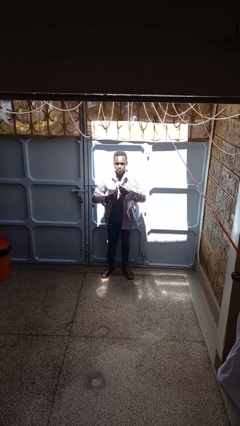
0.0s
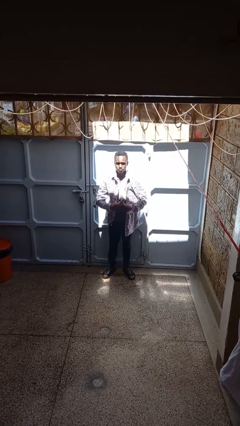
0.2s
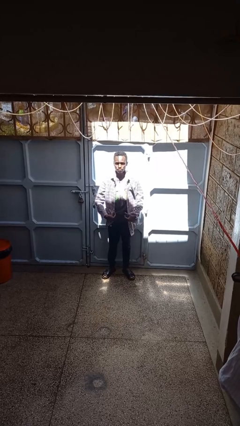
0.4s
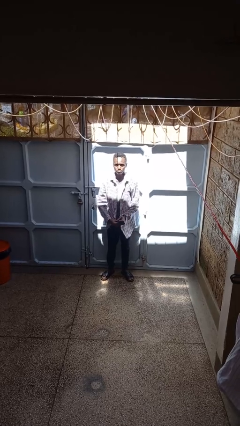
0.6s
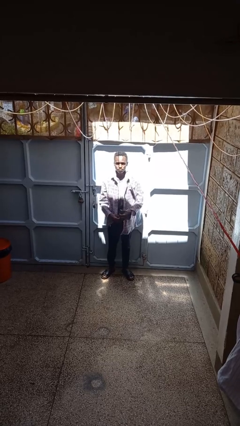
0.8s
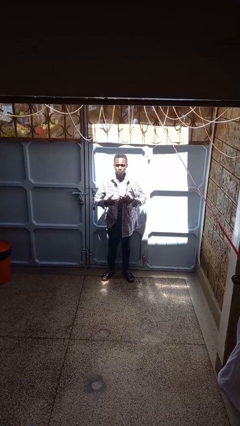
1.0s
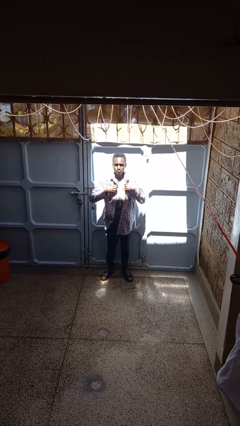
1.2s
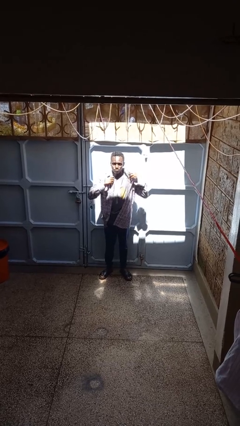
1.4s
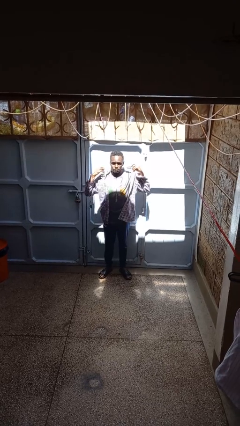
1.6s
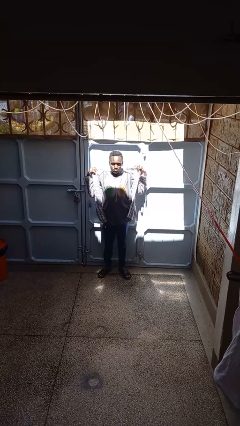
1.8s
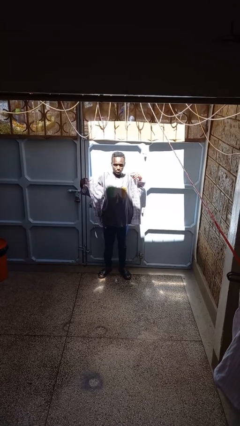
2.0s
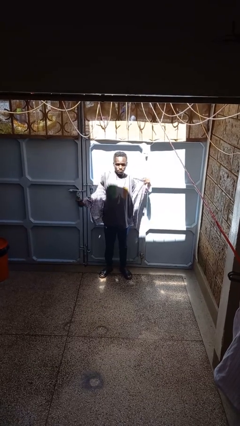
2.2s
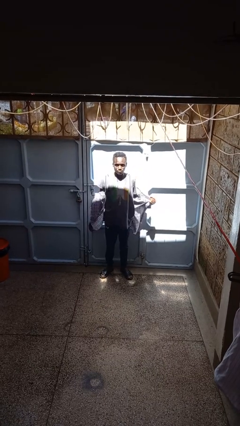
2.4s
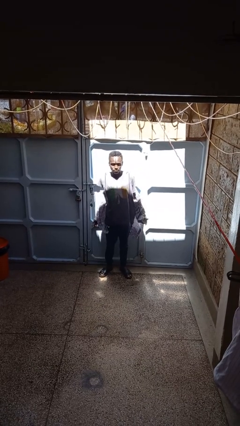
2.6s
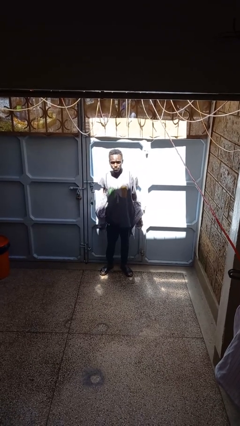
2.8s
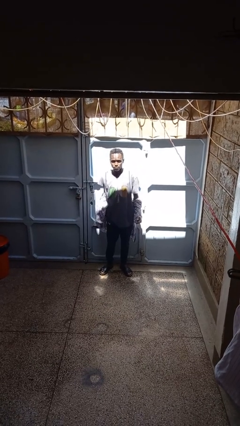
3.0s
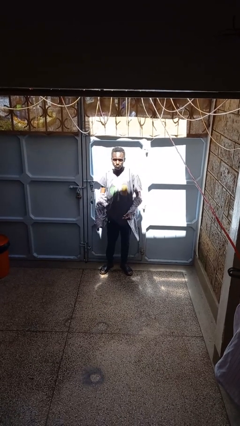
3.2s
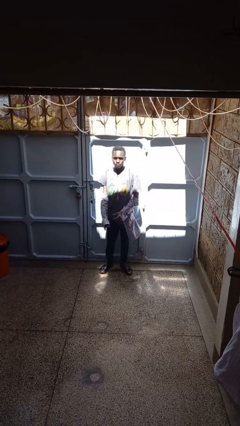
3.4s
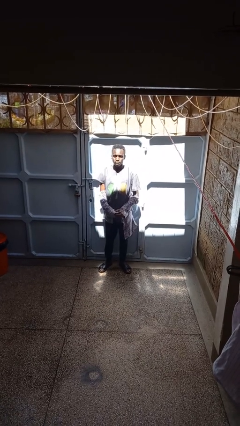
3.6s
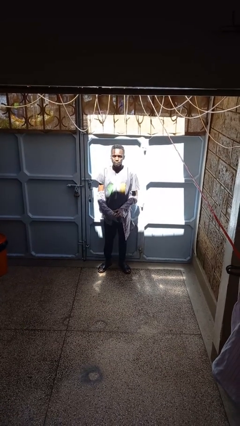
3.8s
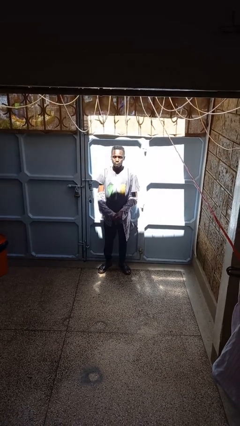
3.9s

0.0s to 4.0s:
person takes off shirt

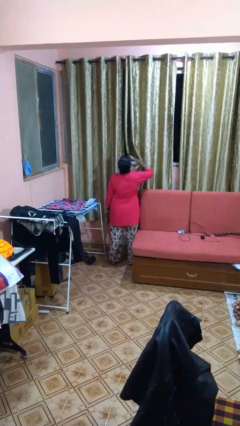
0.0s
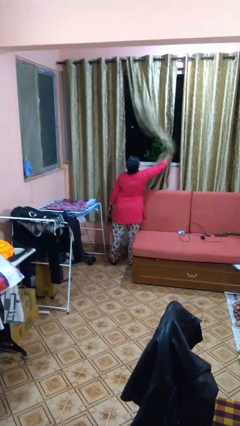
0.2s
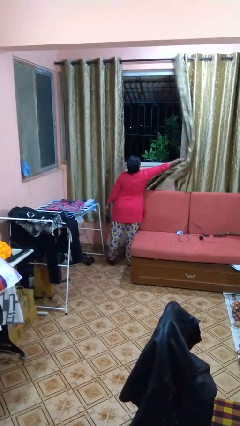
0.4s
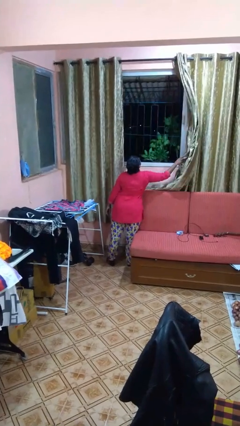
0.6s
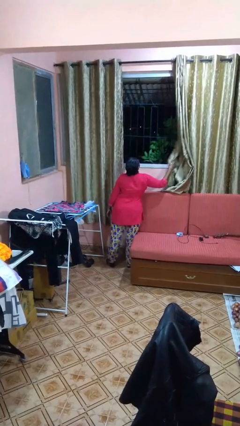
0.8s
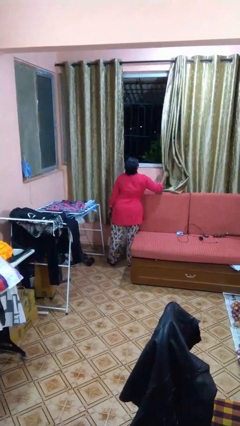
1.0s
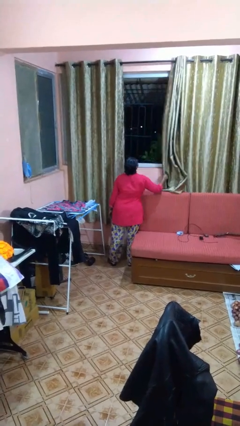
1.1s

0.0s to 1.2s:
person opens curtains

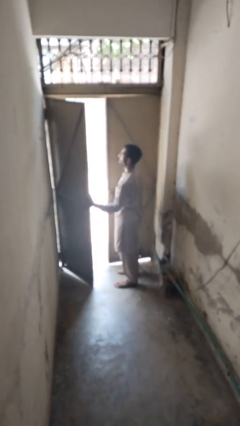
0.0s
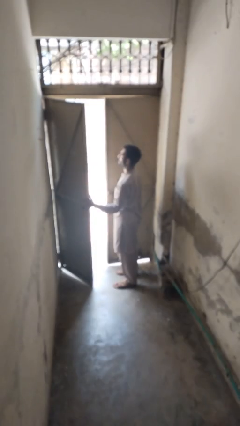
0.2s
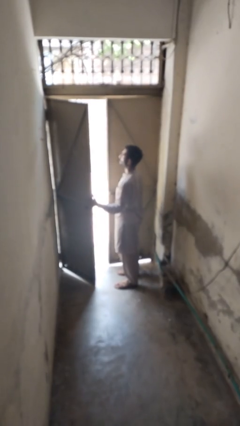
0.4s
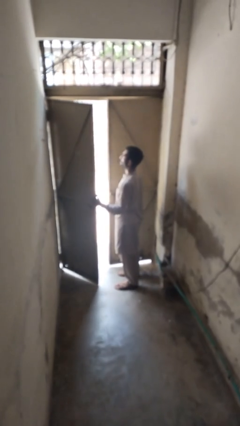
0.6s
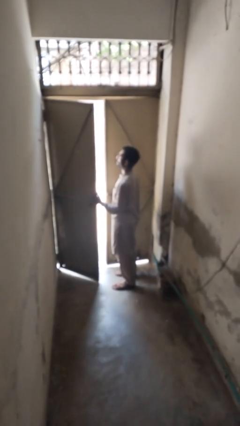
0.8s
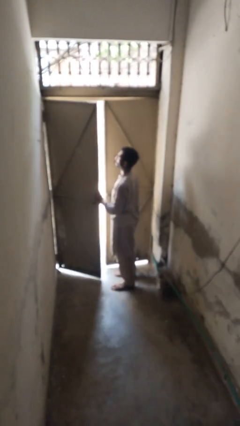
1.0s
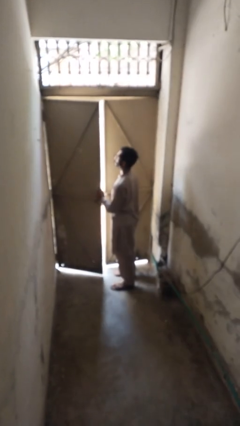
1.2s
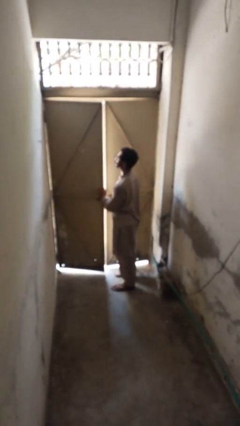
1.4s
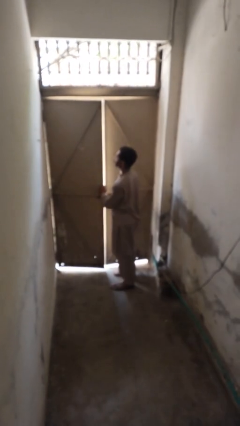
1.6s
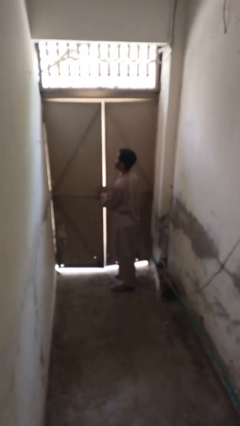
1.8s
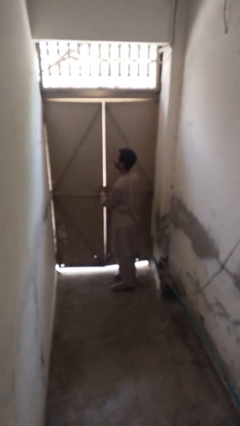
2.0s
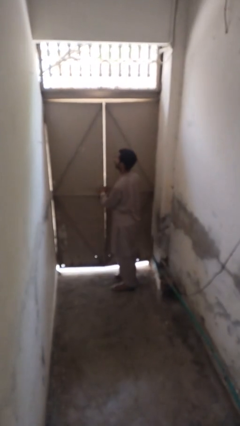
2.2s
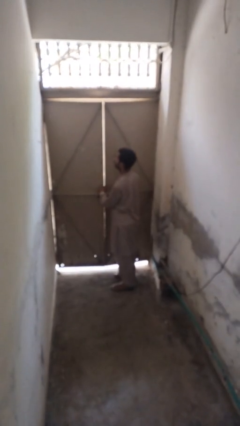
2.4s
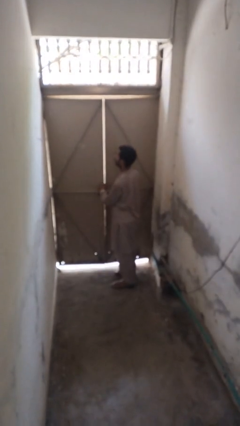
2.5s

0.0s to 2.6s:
person closes gate

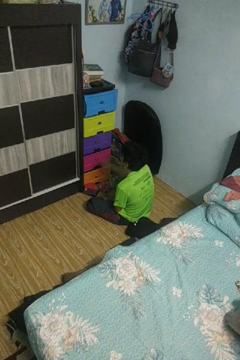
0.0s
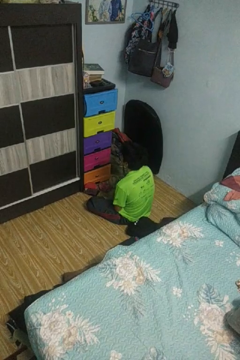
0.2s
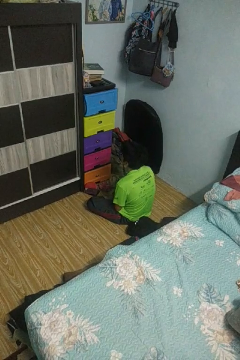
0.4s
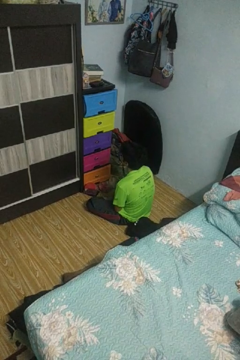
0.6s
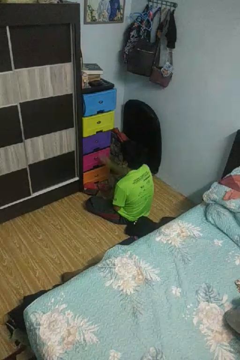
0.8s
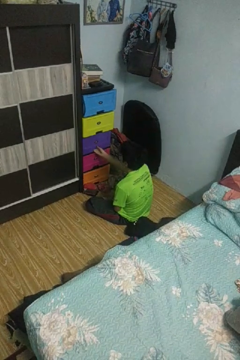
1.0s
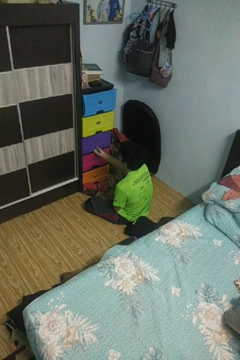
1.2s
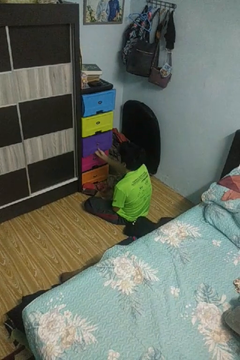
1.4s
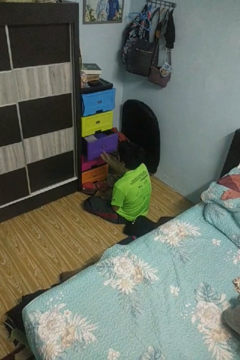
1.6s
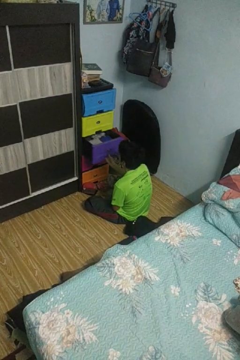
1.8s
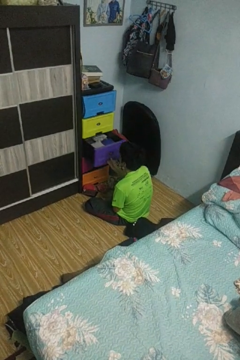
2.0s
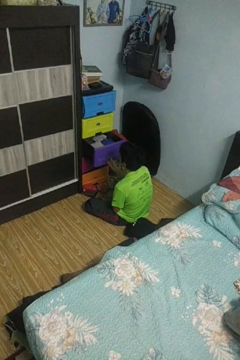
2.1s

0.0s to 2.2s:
person opens dresser drawer

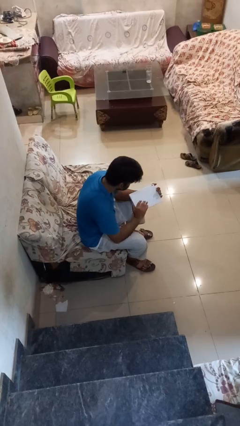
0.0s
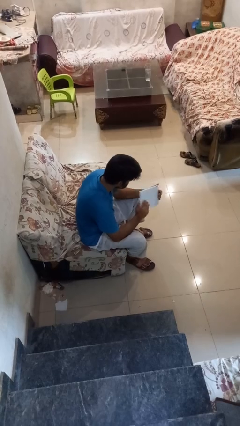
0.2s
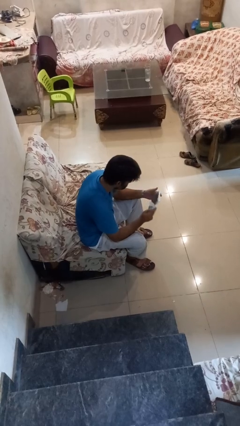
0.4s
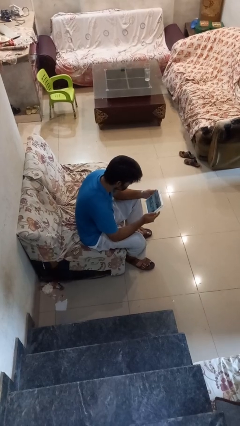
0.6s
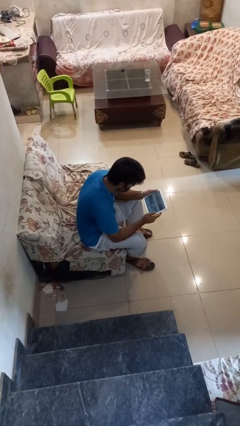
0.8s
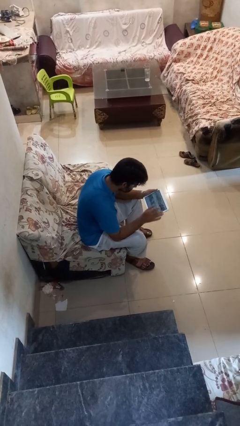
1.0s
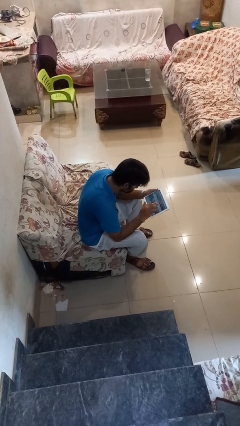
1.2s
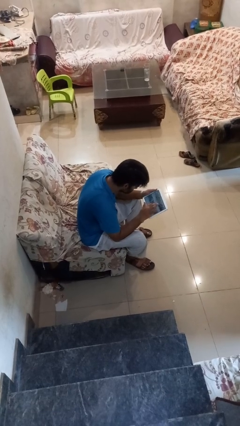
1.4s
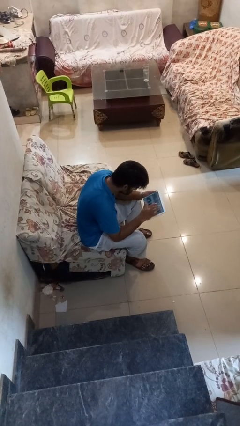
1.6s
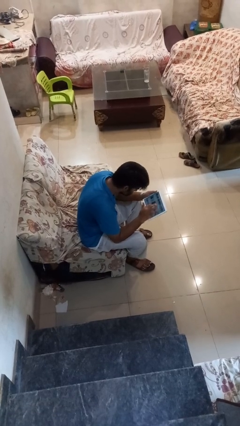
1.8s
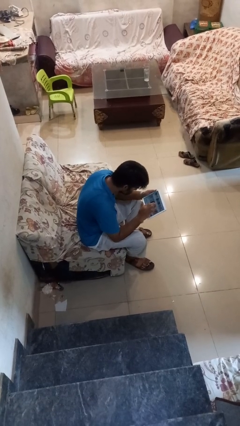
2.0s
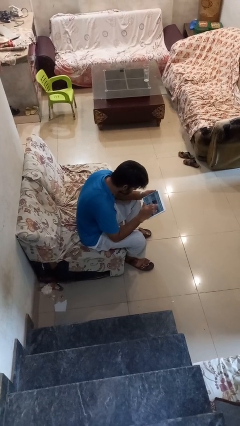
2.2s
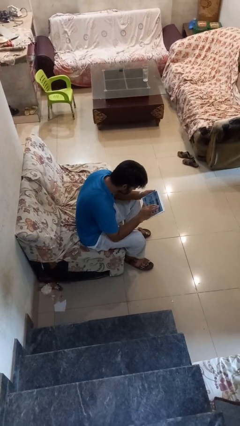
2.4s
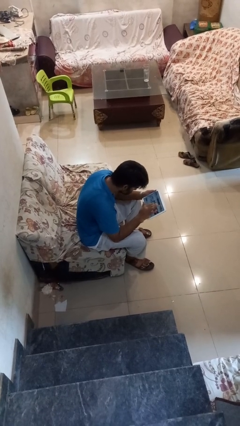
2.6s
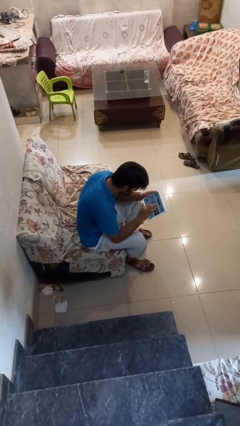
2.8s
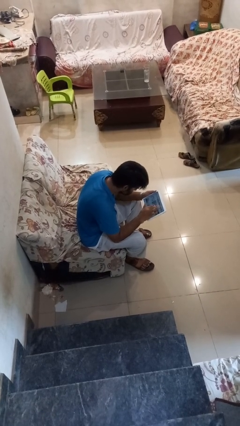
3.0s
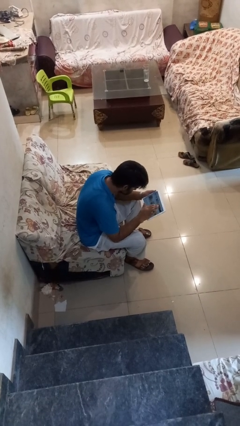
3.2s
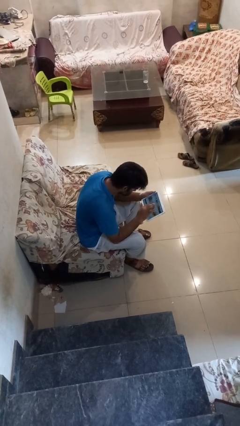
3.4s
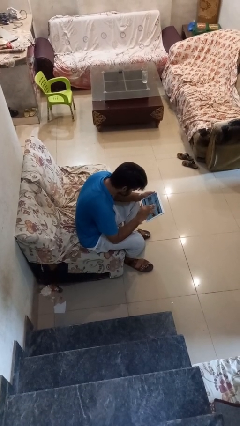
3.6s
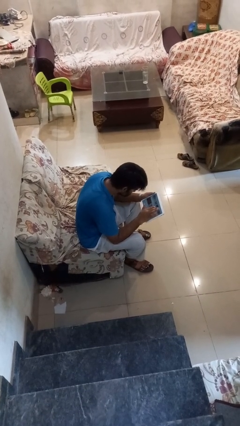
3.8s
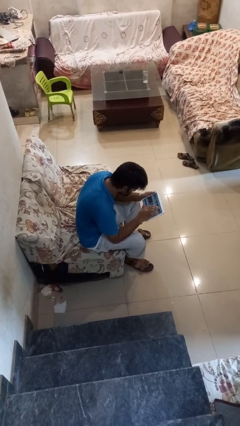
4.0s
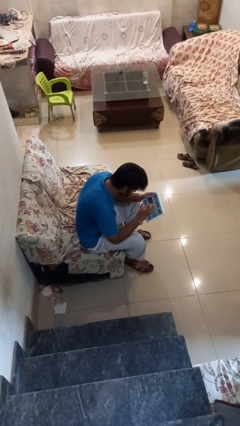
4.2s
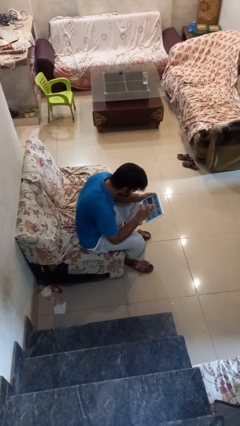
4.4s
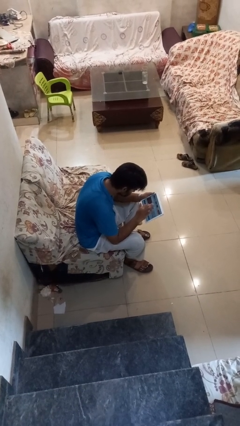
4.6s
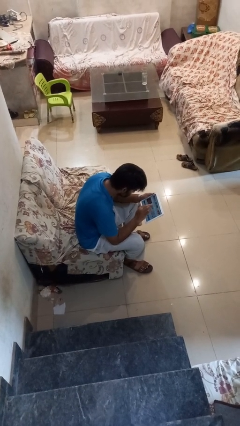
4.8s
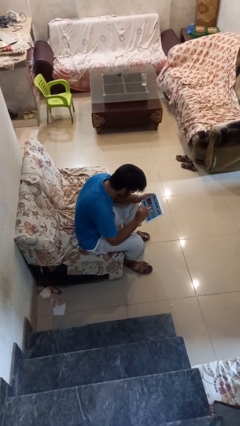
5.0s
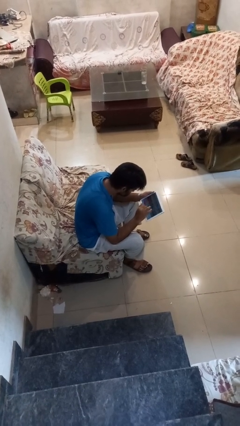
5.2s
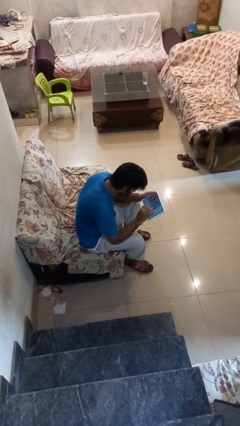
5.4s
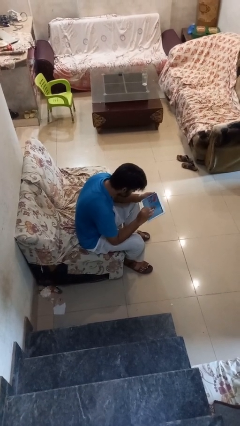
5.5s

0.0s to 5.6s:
person interacts with tablet

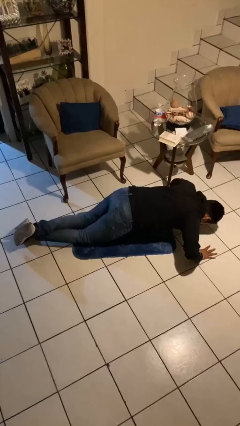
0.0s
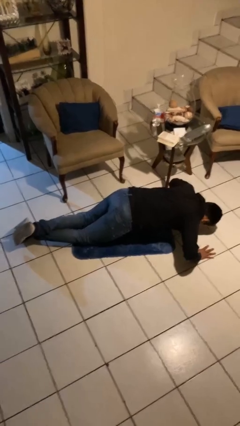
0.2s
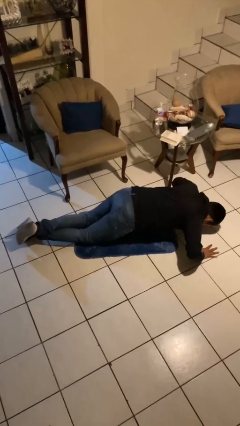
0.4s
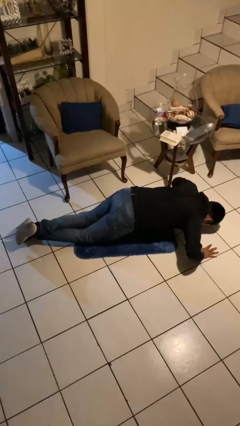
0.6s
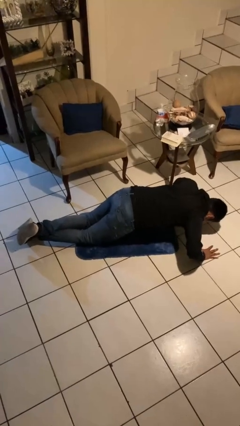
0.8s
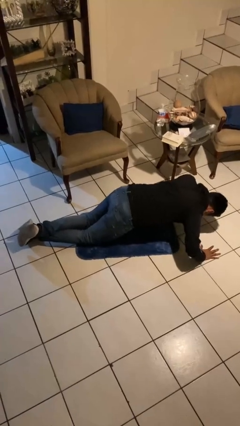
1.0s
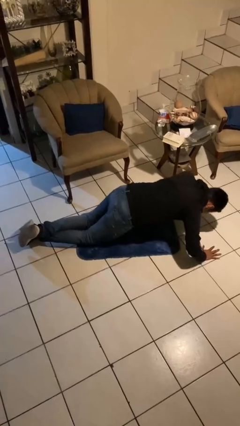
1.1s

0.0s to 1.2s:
person exercises with pushup

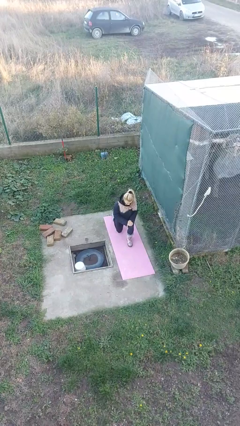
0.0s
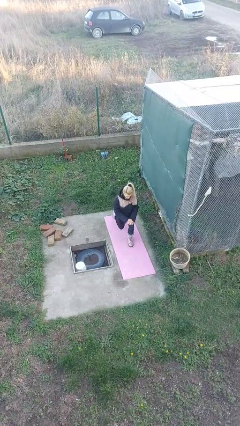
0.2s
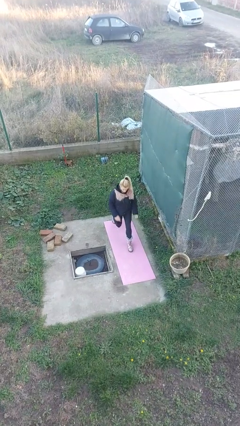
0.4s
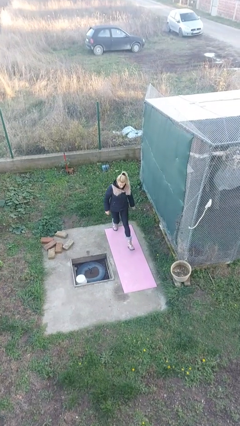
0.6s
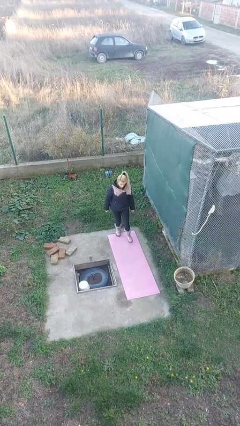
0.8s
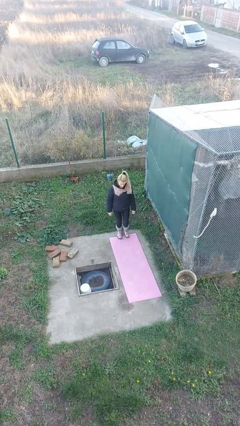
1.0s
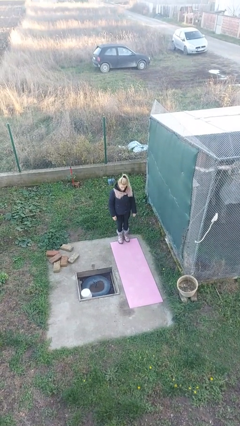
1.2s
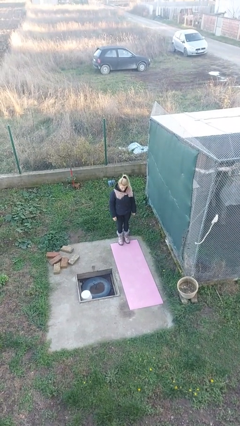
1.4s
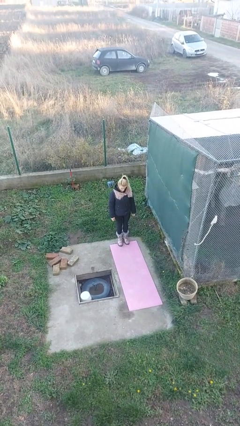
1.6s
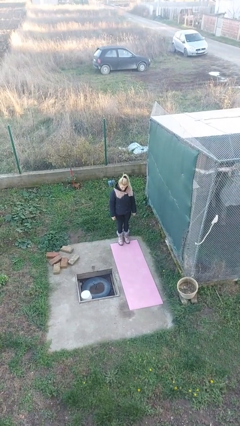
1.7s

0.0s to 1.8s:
person stands up from floor
